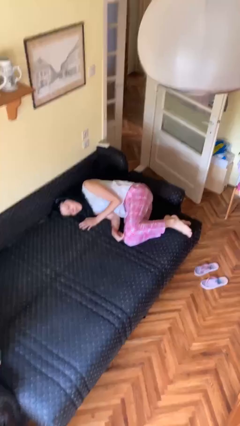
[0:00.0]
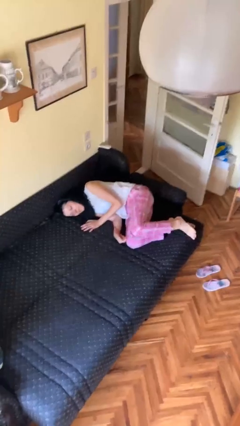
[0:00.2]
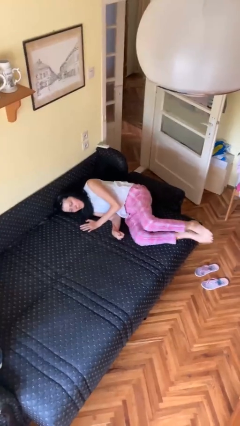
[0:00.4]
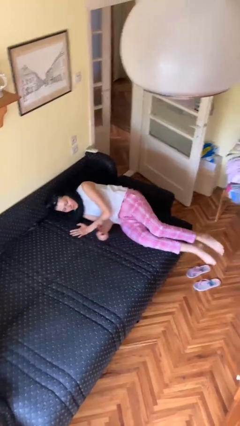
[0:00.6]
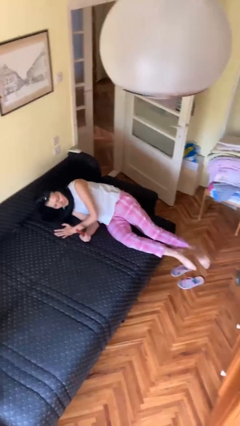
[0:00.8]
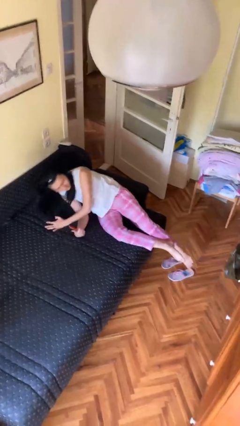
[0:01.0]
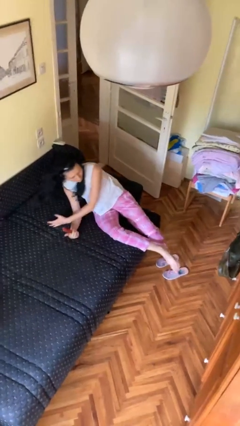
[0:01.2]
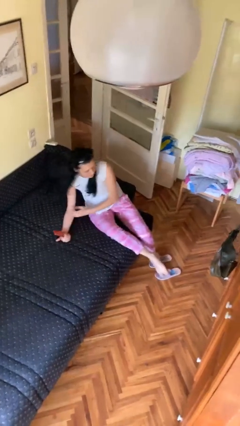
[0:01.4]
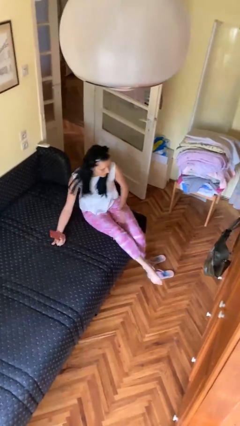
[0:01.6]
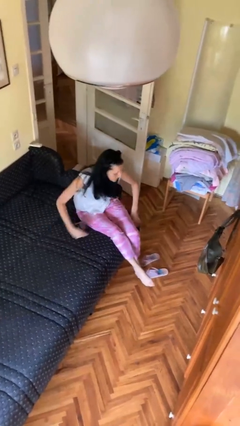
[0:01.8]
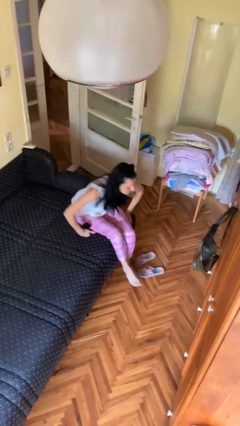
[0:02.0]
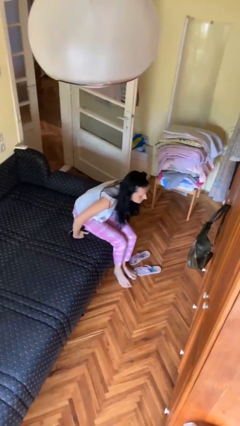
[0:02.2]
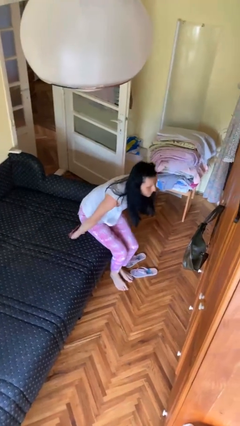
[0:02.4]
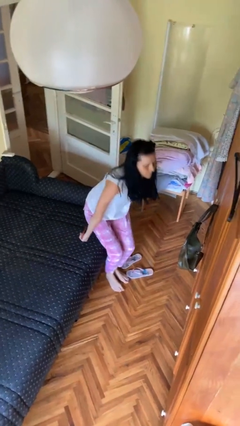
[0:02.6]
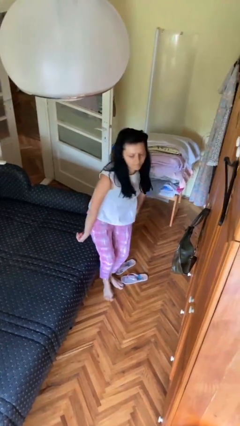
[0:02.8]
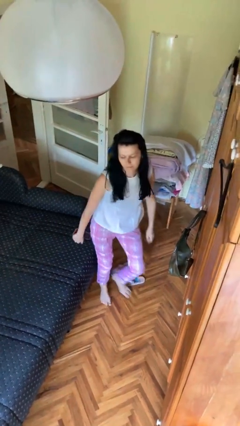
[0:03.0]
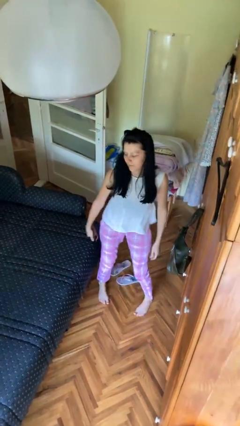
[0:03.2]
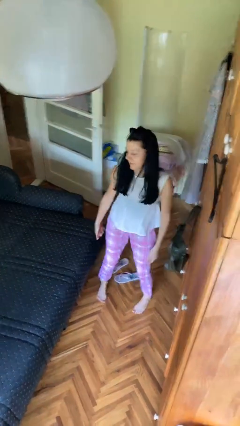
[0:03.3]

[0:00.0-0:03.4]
person stands up

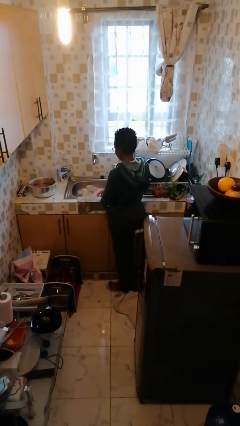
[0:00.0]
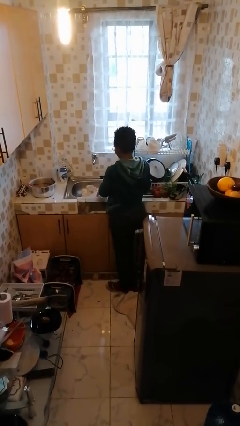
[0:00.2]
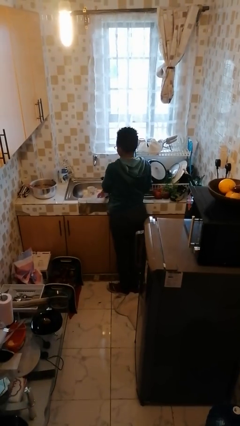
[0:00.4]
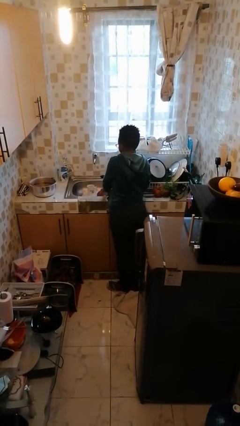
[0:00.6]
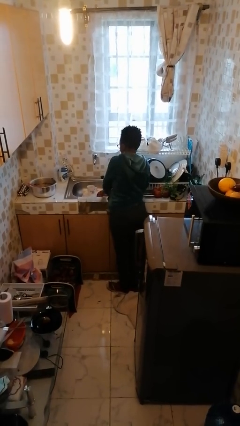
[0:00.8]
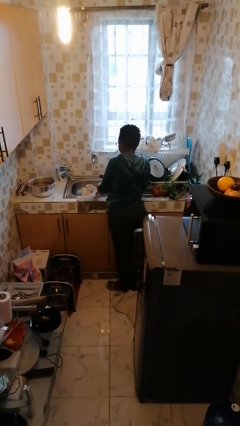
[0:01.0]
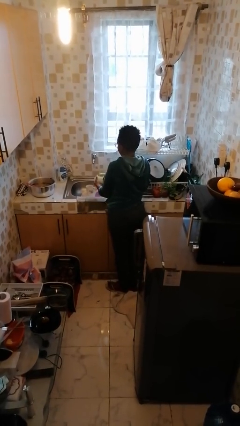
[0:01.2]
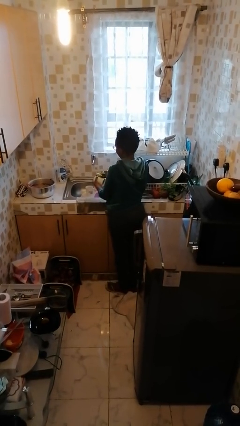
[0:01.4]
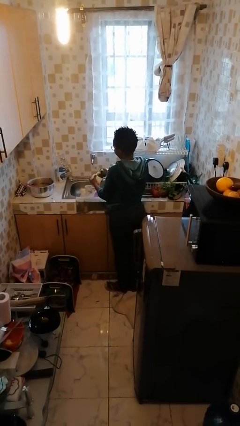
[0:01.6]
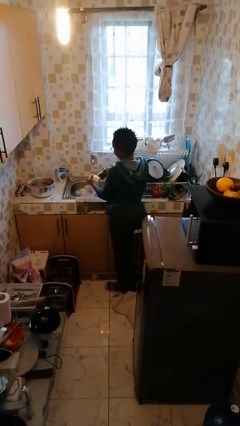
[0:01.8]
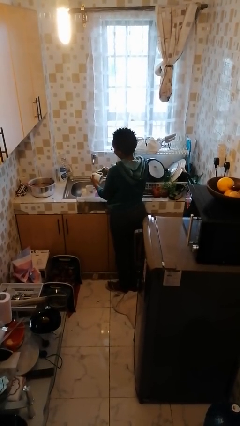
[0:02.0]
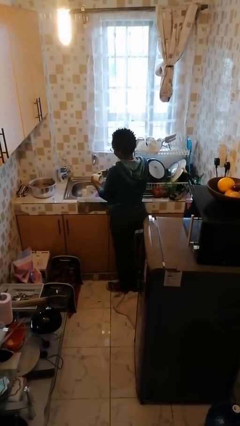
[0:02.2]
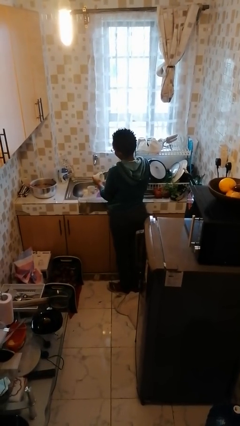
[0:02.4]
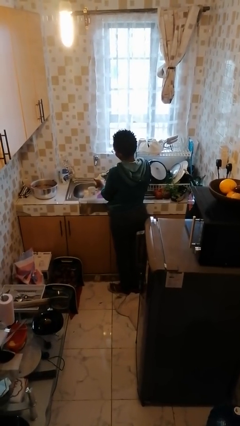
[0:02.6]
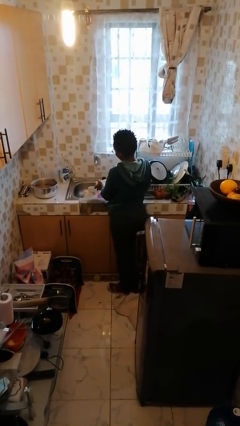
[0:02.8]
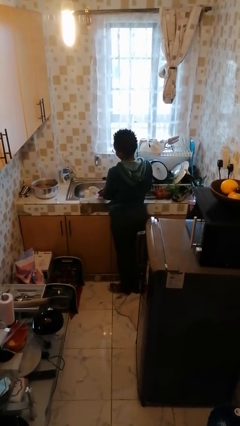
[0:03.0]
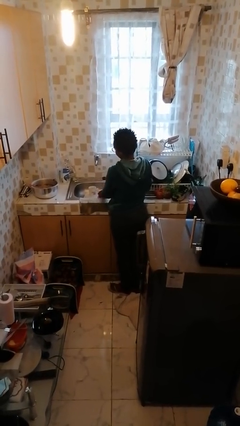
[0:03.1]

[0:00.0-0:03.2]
person washes dish

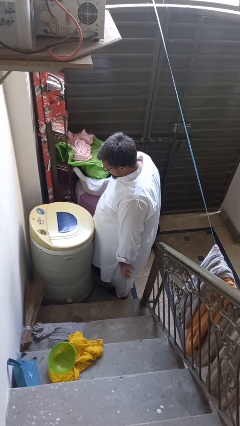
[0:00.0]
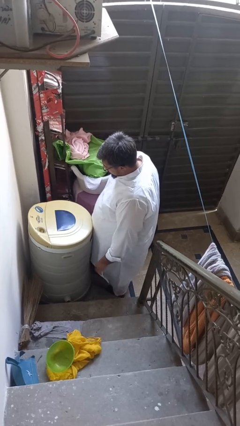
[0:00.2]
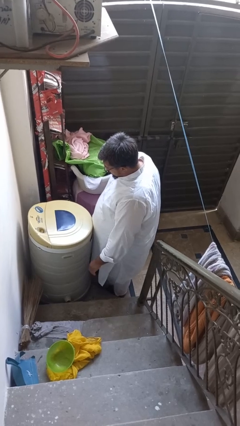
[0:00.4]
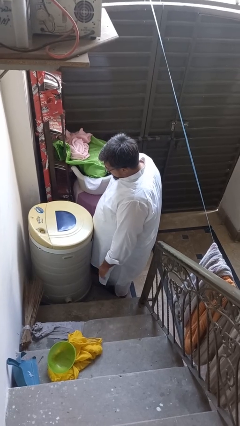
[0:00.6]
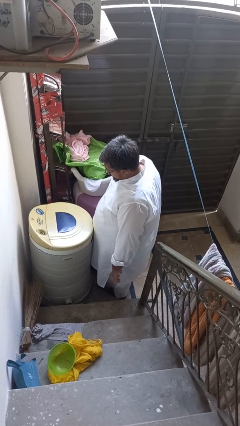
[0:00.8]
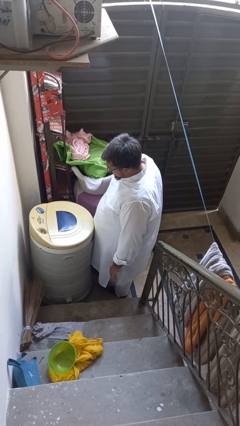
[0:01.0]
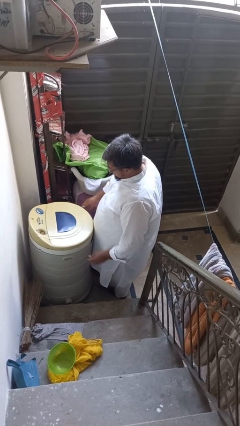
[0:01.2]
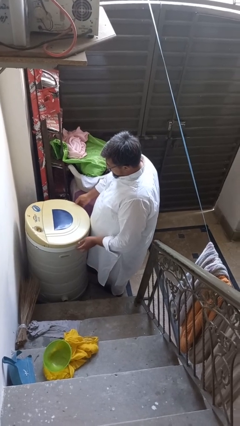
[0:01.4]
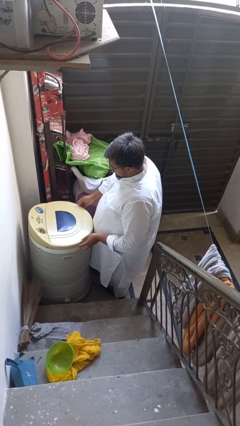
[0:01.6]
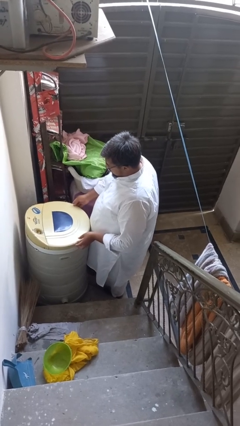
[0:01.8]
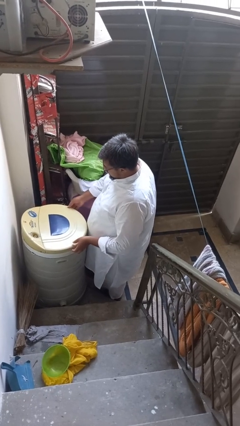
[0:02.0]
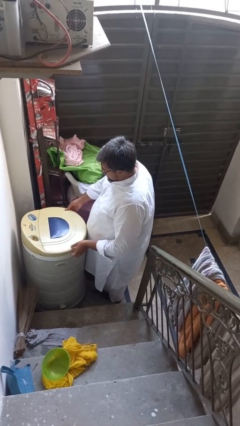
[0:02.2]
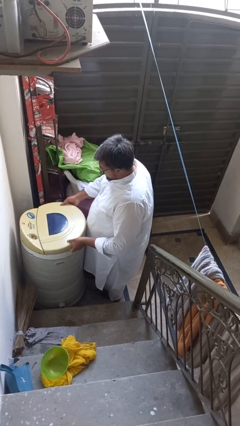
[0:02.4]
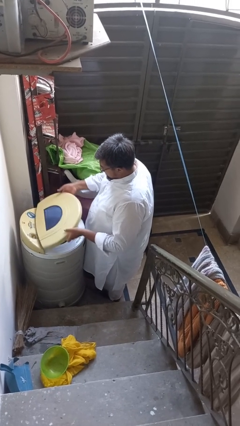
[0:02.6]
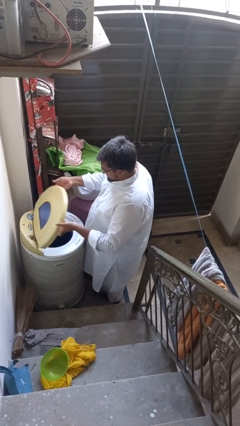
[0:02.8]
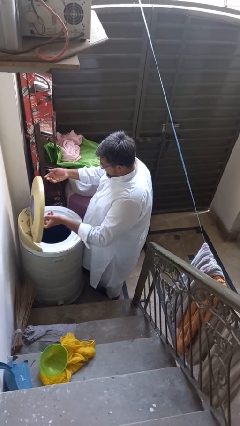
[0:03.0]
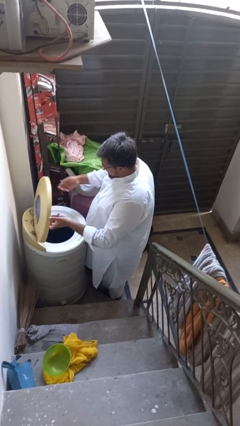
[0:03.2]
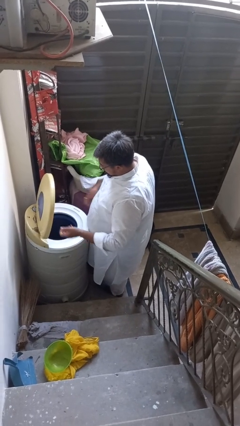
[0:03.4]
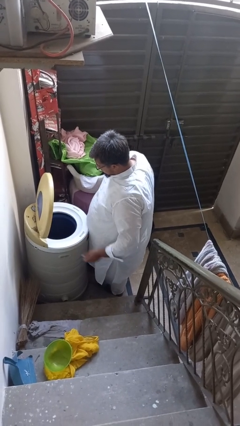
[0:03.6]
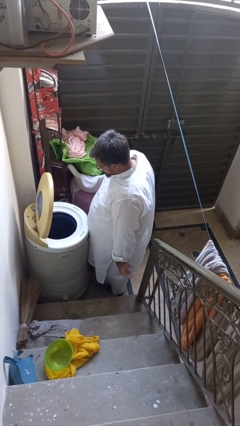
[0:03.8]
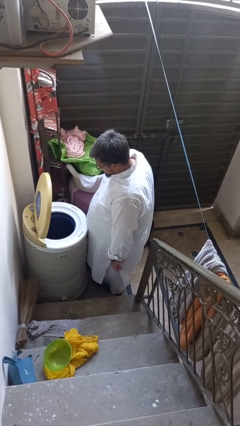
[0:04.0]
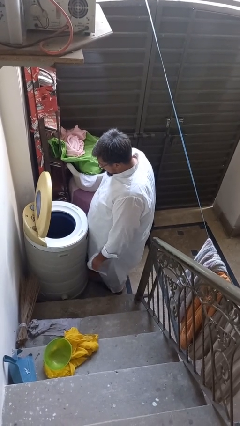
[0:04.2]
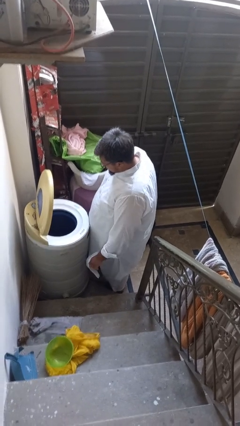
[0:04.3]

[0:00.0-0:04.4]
person opens clothes washer

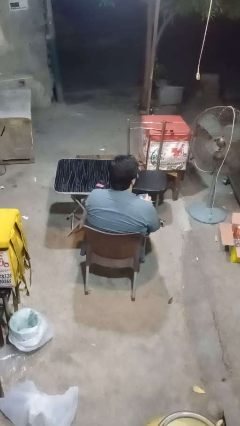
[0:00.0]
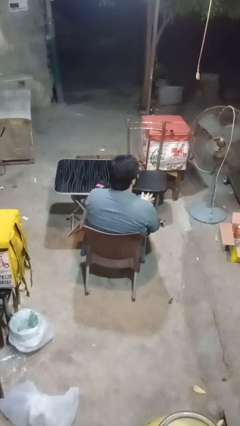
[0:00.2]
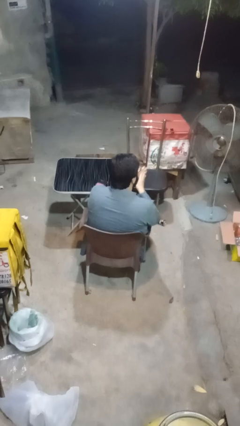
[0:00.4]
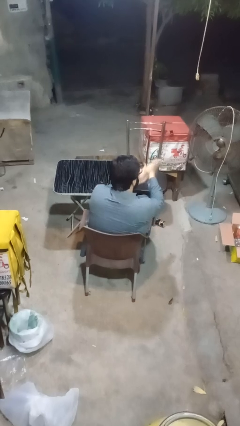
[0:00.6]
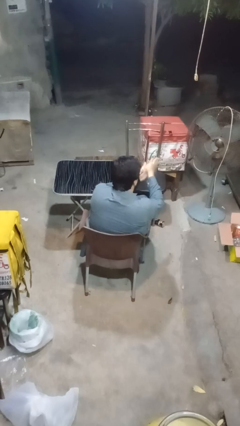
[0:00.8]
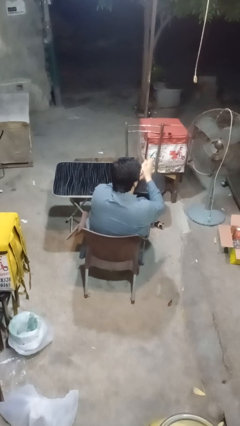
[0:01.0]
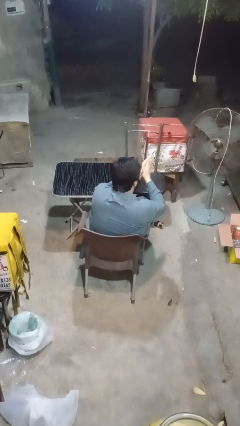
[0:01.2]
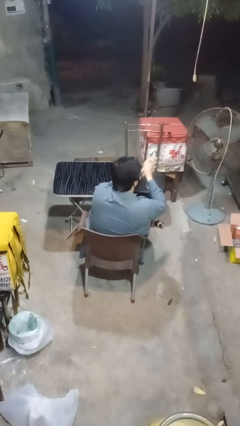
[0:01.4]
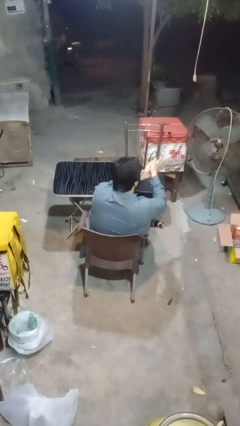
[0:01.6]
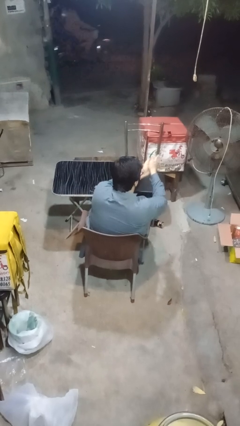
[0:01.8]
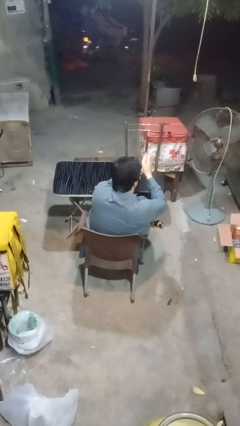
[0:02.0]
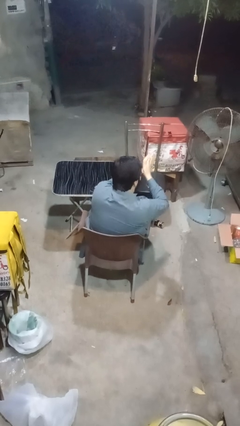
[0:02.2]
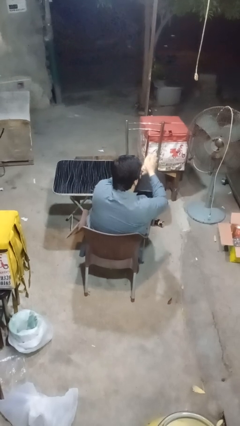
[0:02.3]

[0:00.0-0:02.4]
person blows into hands

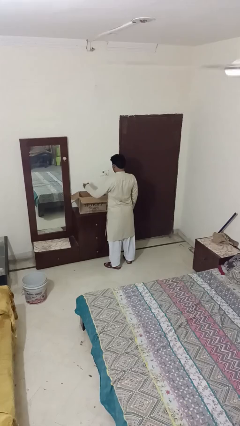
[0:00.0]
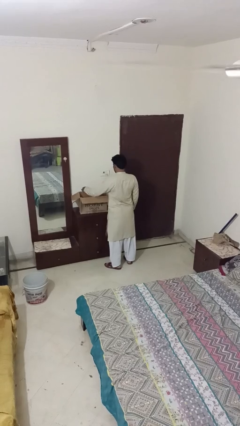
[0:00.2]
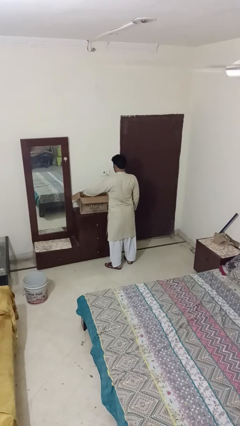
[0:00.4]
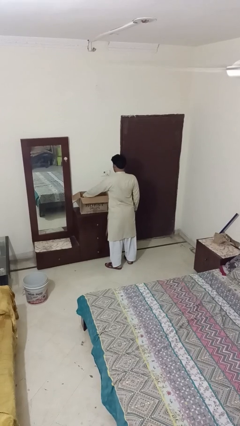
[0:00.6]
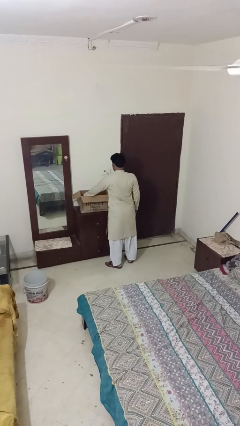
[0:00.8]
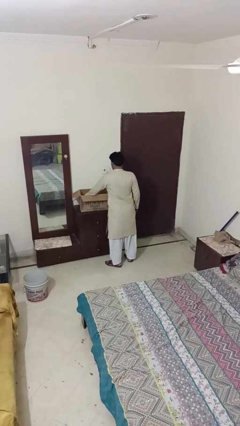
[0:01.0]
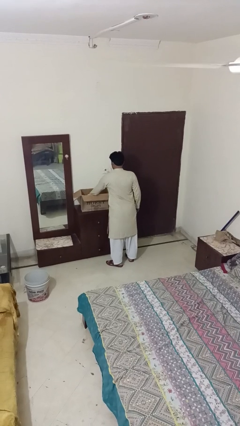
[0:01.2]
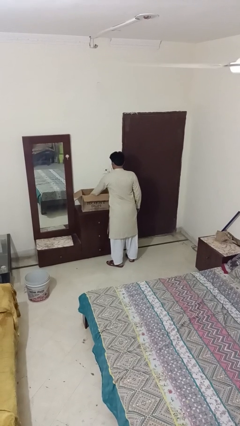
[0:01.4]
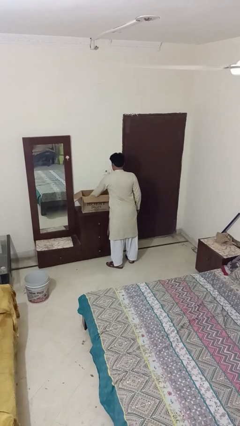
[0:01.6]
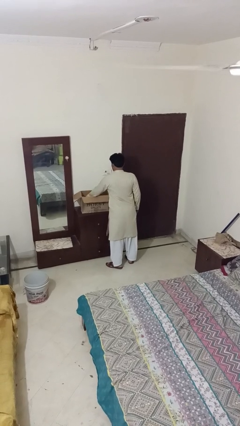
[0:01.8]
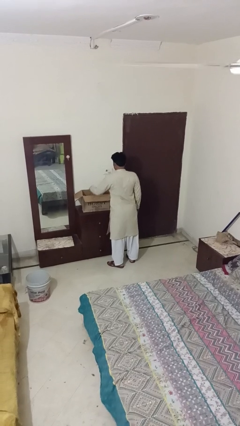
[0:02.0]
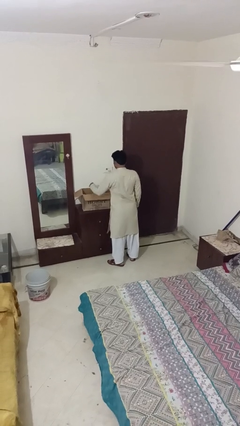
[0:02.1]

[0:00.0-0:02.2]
person puts object into box

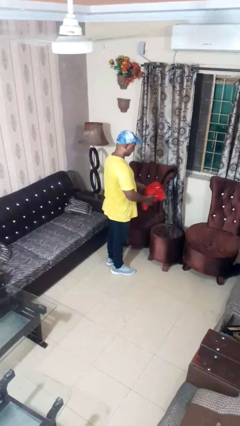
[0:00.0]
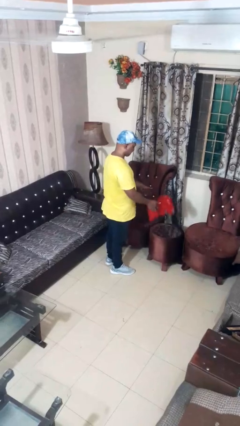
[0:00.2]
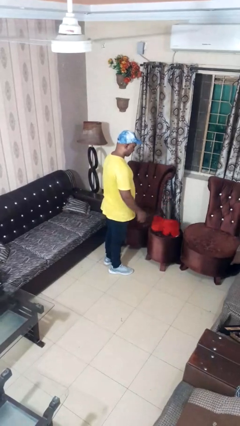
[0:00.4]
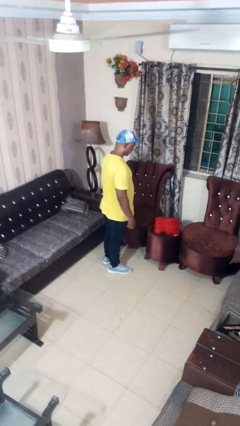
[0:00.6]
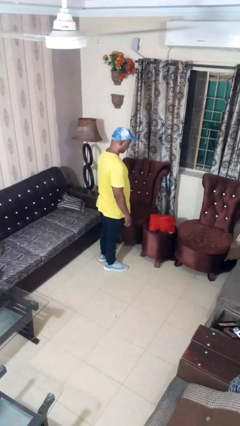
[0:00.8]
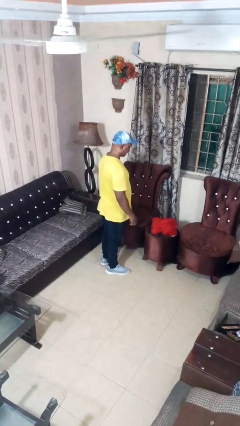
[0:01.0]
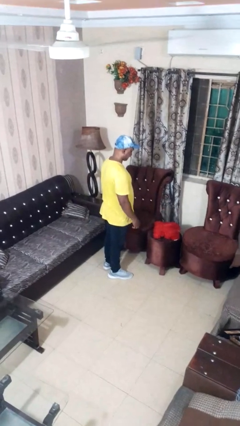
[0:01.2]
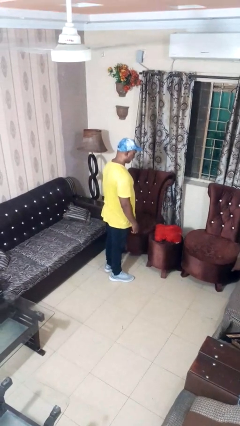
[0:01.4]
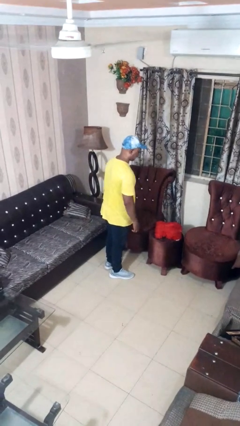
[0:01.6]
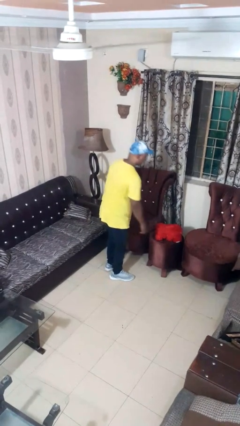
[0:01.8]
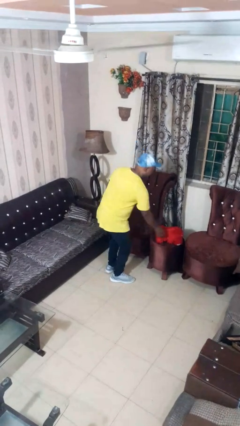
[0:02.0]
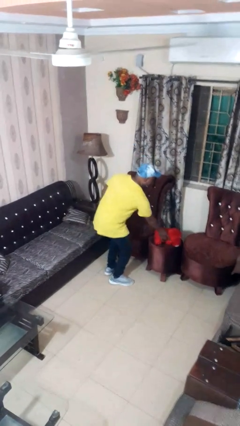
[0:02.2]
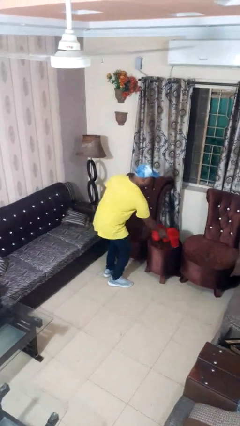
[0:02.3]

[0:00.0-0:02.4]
person throws object on table
